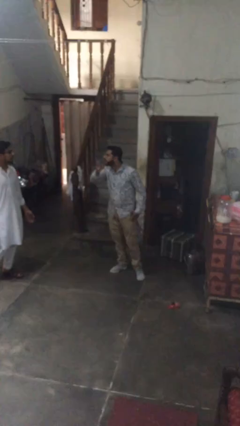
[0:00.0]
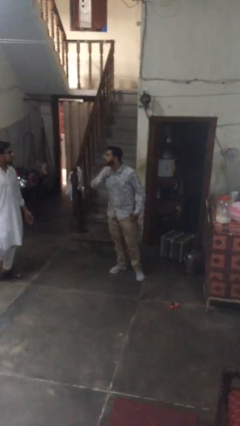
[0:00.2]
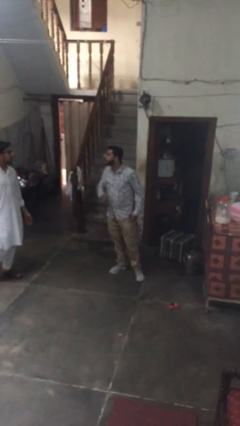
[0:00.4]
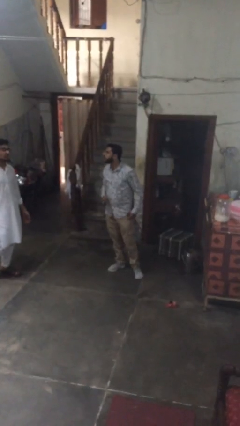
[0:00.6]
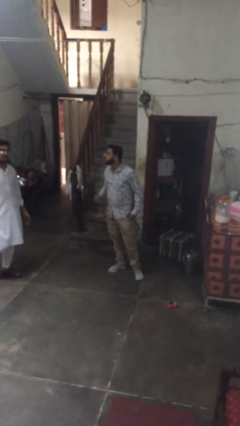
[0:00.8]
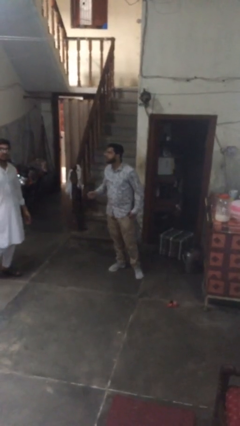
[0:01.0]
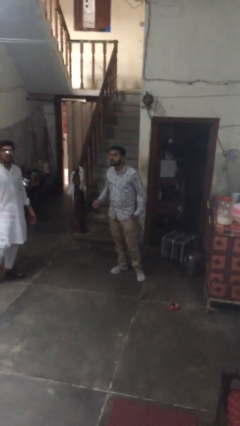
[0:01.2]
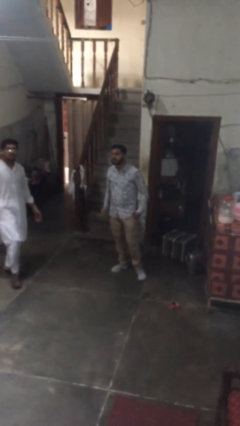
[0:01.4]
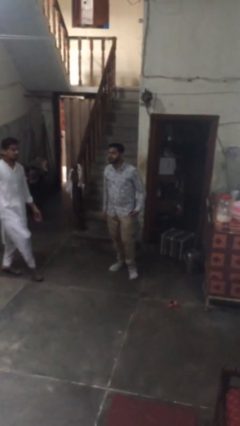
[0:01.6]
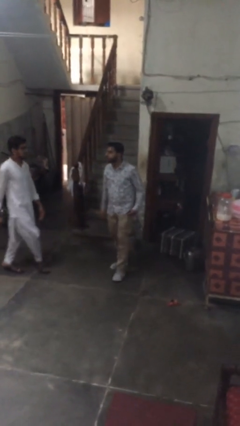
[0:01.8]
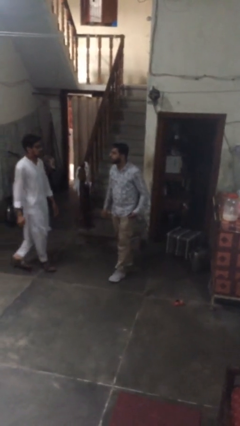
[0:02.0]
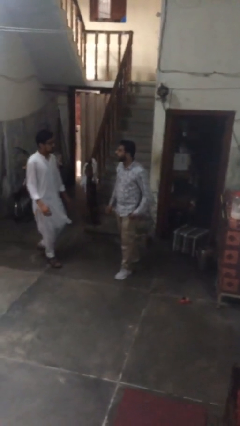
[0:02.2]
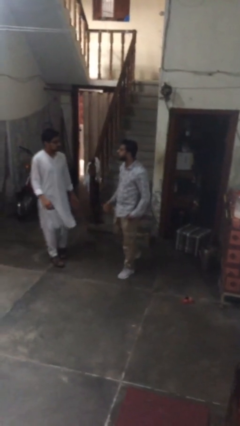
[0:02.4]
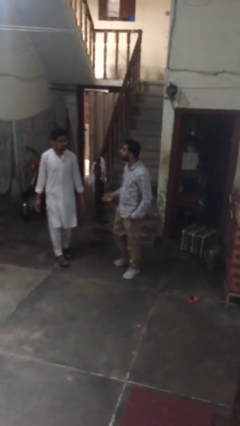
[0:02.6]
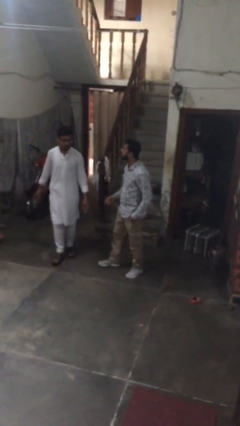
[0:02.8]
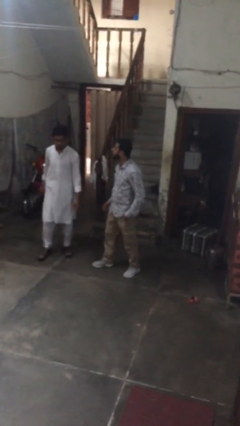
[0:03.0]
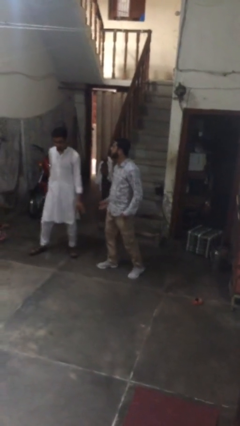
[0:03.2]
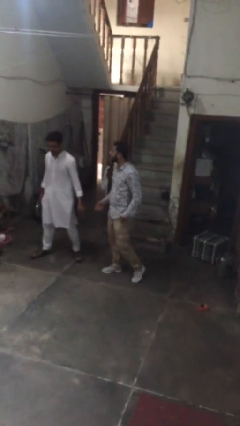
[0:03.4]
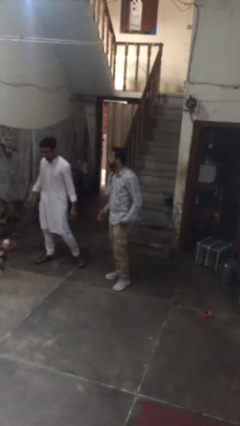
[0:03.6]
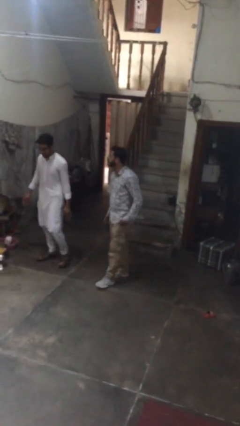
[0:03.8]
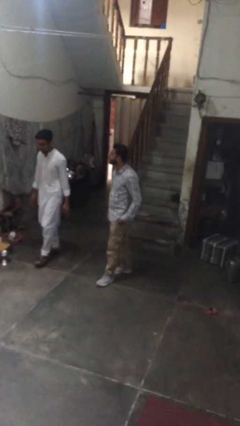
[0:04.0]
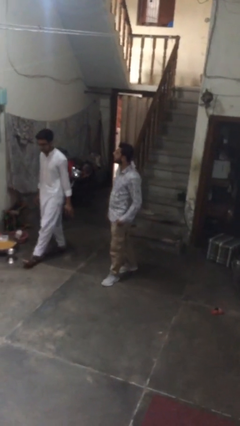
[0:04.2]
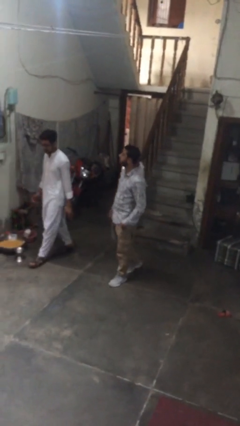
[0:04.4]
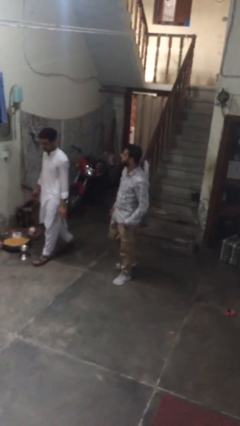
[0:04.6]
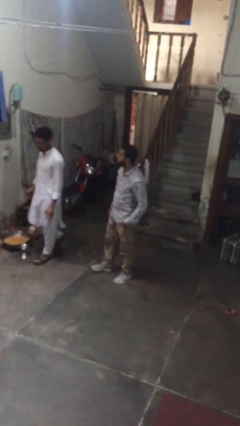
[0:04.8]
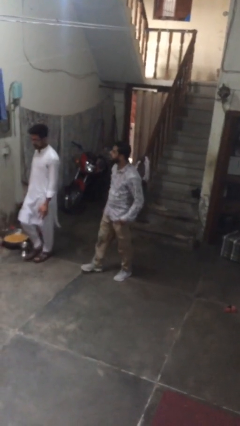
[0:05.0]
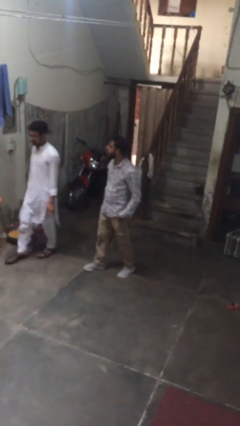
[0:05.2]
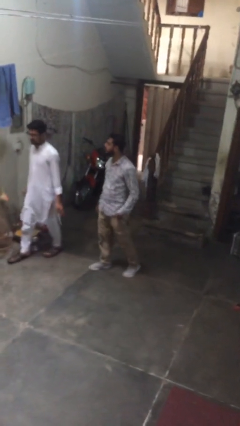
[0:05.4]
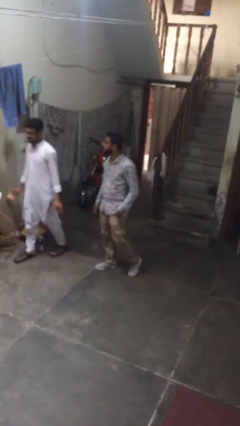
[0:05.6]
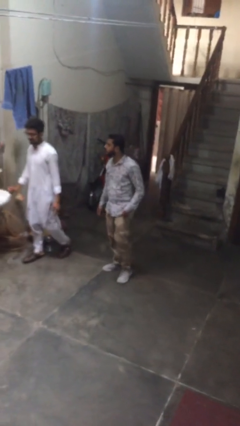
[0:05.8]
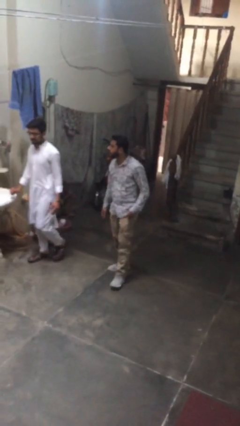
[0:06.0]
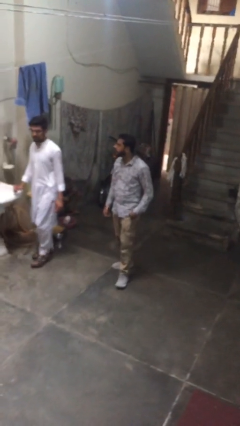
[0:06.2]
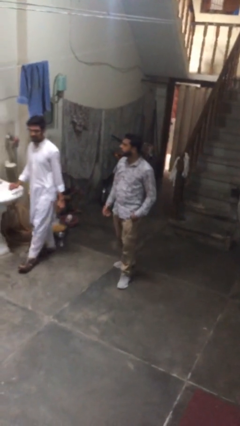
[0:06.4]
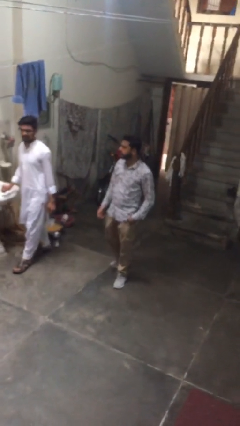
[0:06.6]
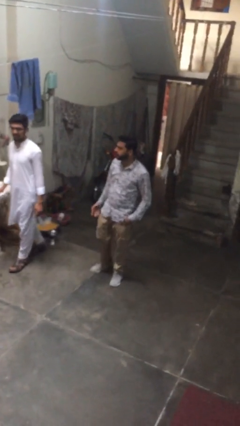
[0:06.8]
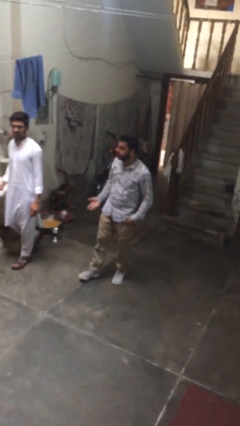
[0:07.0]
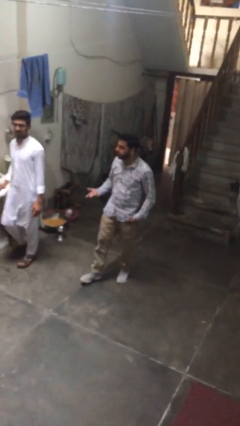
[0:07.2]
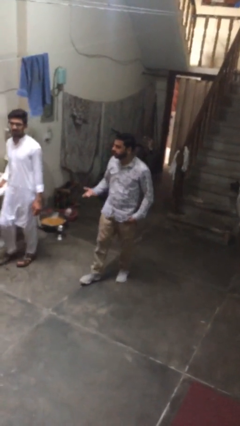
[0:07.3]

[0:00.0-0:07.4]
person talks to person

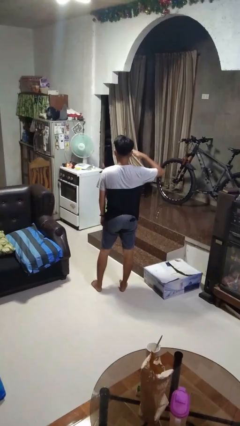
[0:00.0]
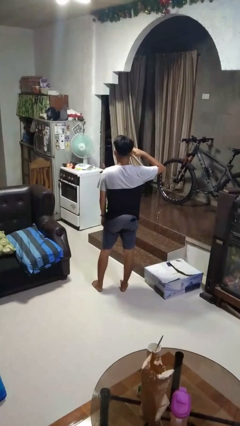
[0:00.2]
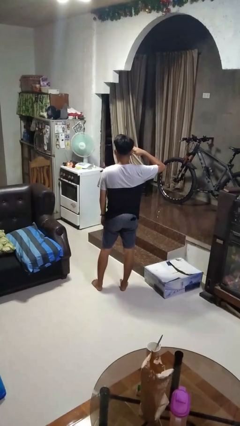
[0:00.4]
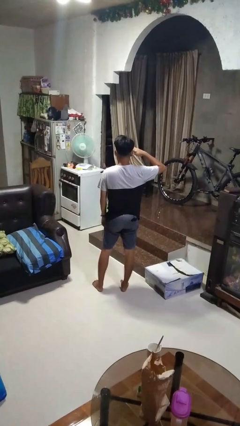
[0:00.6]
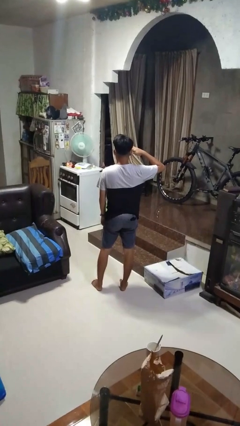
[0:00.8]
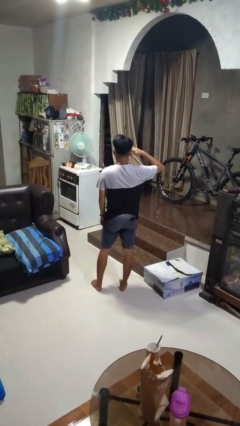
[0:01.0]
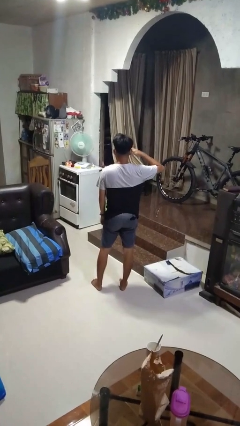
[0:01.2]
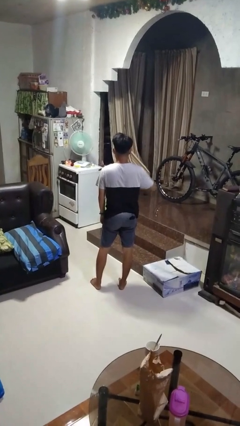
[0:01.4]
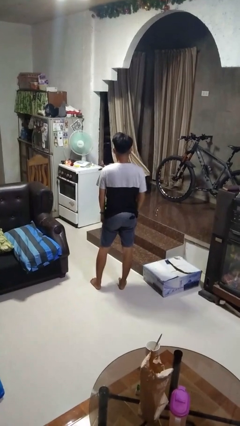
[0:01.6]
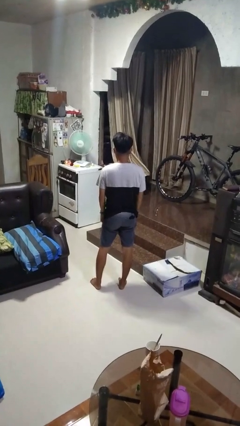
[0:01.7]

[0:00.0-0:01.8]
person salutes

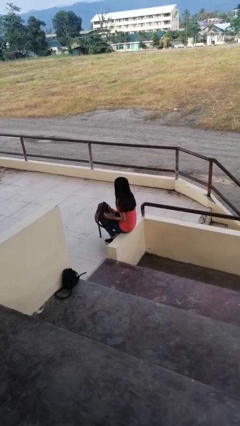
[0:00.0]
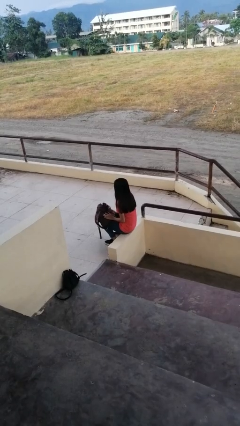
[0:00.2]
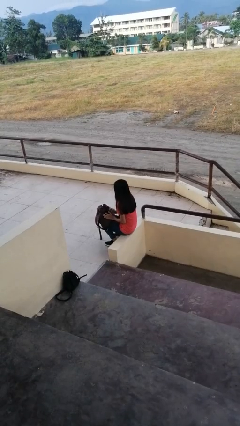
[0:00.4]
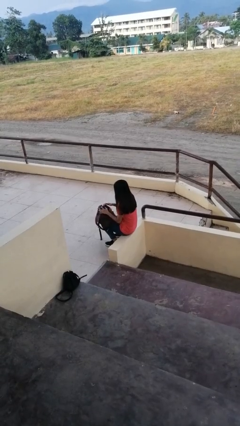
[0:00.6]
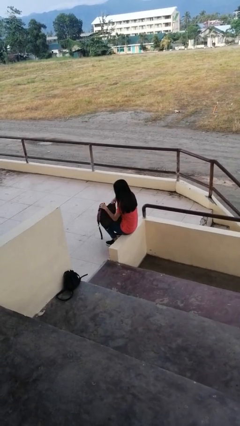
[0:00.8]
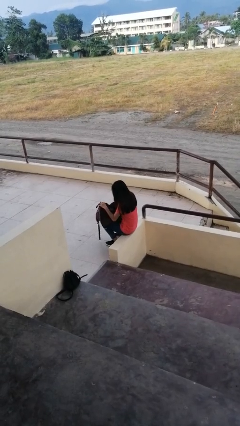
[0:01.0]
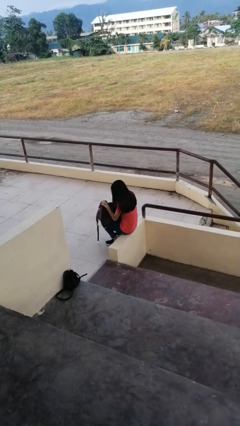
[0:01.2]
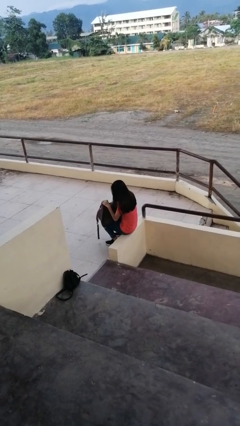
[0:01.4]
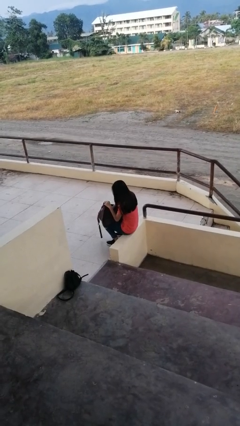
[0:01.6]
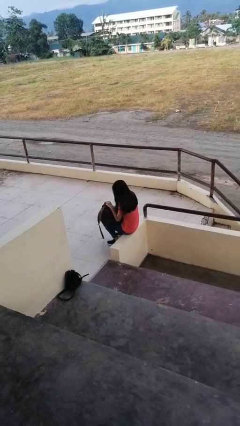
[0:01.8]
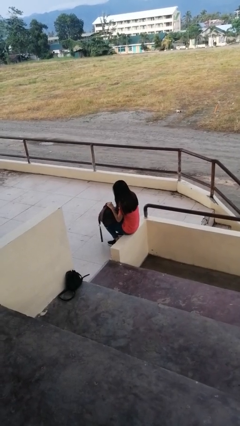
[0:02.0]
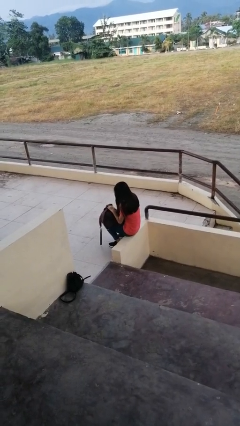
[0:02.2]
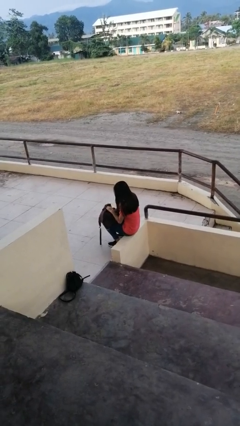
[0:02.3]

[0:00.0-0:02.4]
person searches in backpack

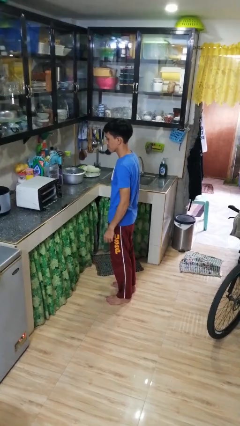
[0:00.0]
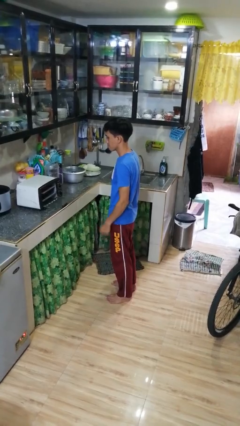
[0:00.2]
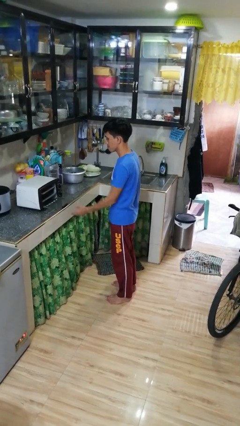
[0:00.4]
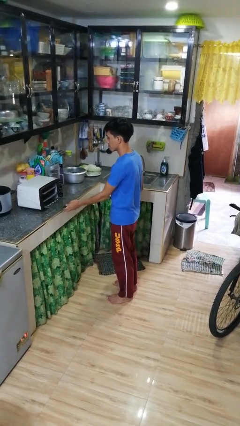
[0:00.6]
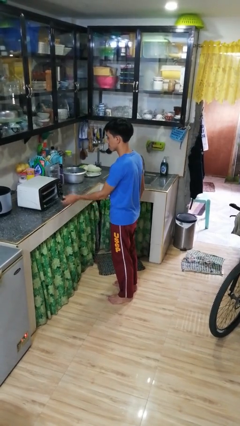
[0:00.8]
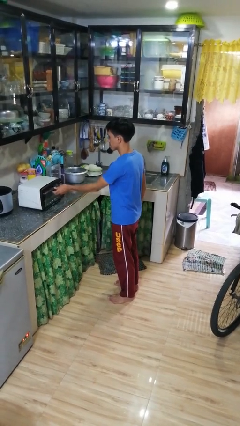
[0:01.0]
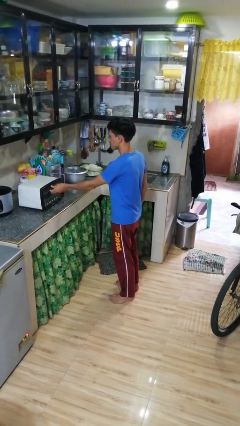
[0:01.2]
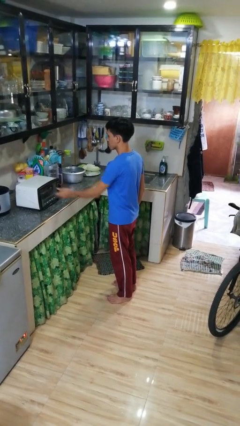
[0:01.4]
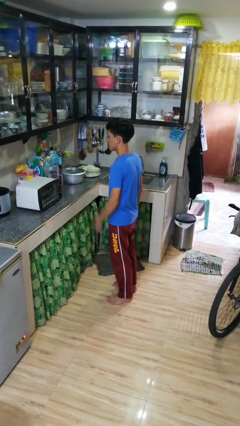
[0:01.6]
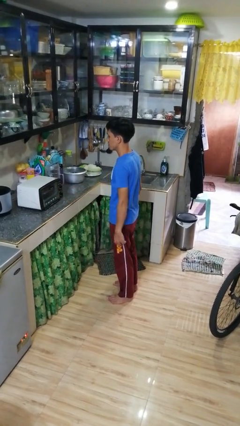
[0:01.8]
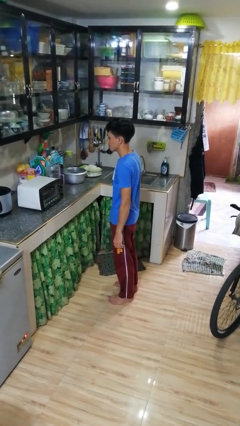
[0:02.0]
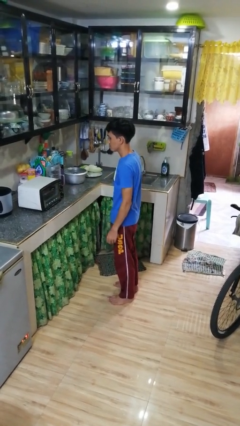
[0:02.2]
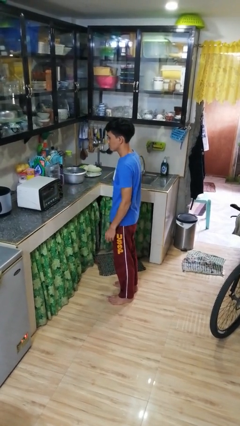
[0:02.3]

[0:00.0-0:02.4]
person closes microwave

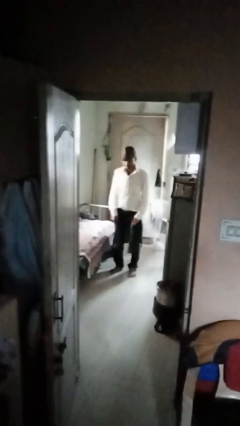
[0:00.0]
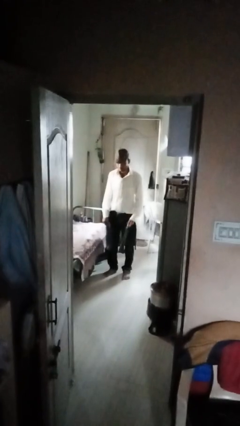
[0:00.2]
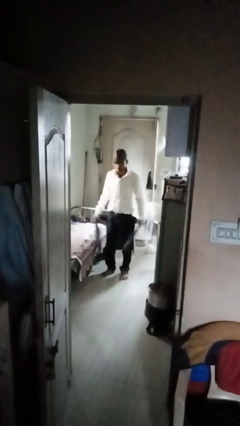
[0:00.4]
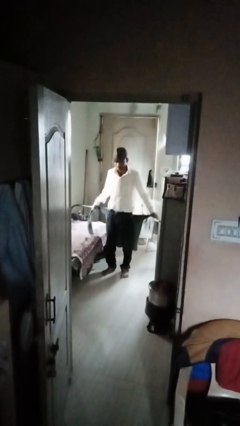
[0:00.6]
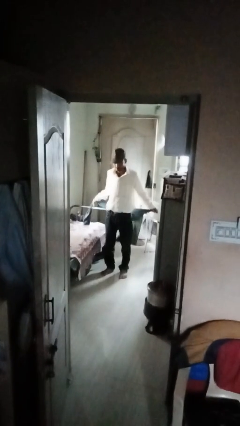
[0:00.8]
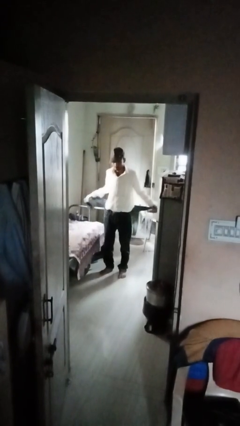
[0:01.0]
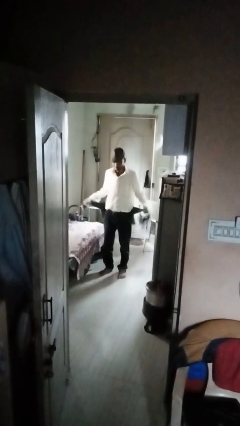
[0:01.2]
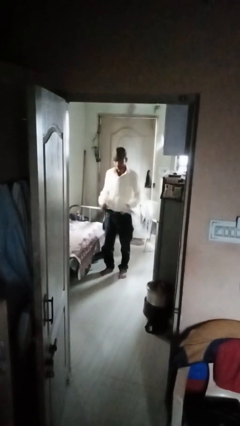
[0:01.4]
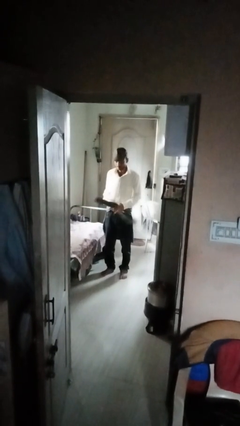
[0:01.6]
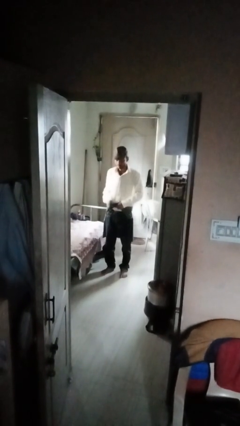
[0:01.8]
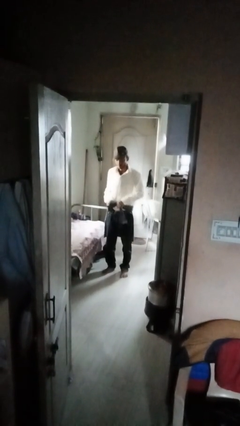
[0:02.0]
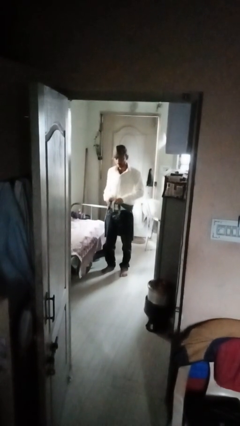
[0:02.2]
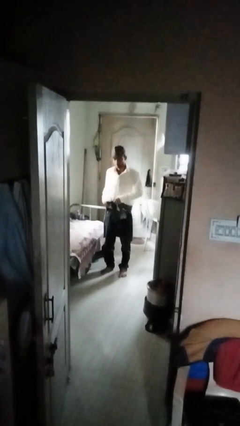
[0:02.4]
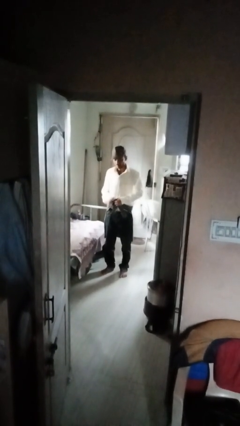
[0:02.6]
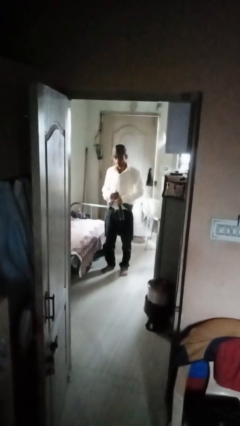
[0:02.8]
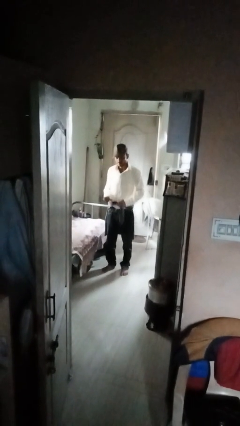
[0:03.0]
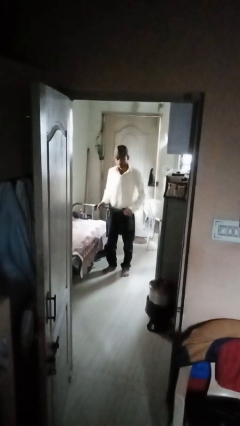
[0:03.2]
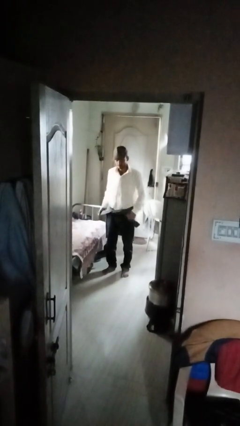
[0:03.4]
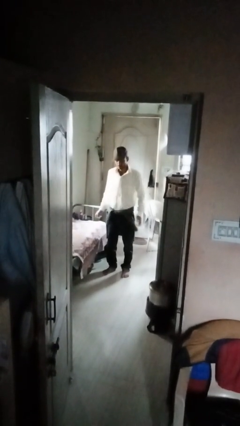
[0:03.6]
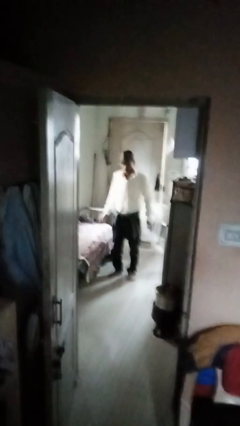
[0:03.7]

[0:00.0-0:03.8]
person ties jacket around waist

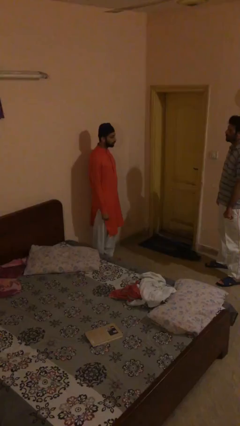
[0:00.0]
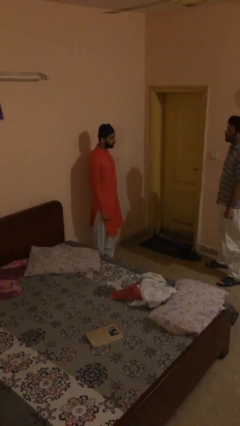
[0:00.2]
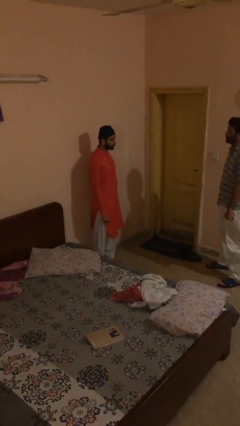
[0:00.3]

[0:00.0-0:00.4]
person shakes hand
